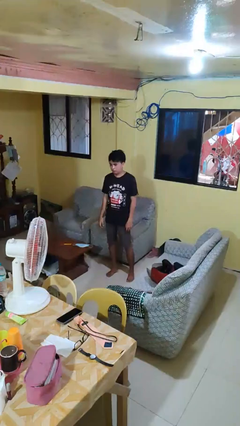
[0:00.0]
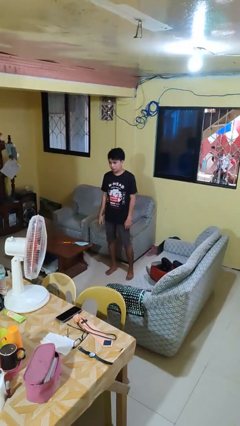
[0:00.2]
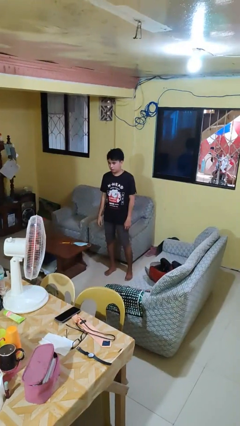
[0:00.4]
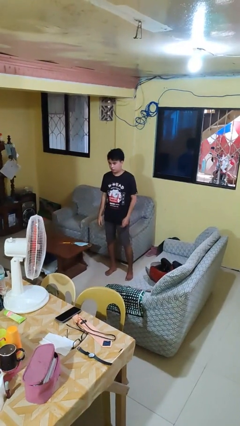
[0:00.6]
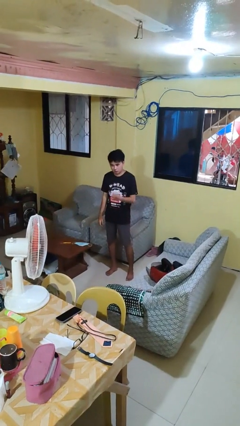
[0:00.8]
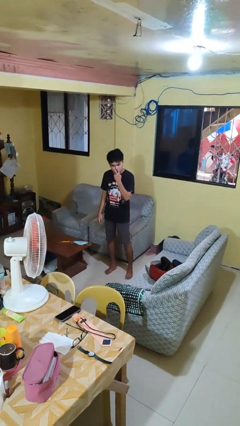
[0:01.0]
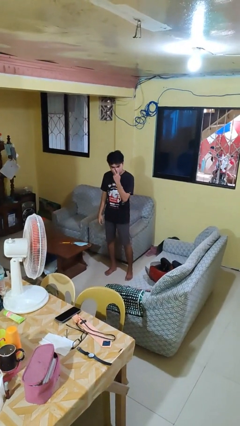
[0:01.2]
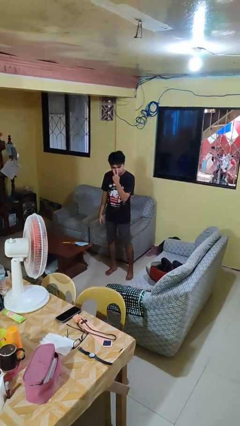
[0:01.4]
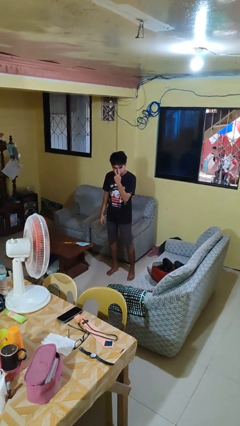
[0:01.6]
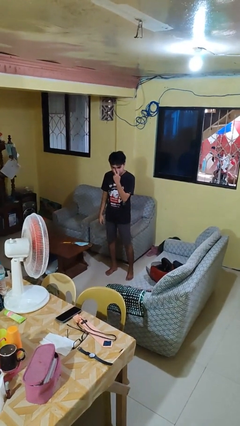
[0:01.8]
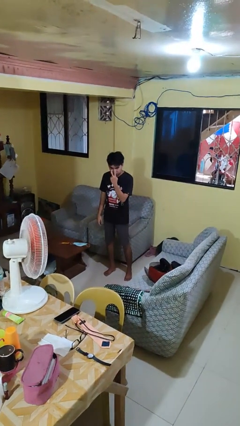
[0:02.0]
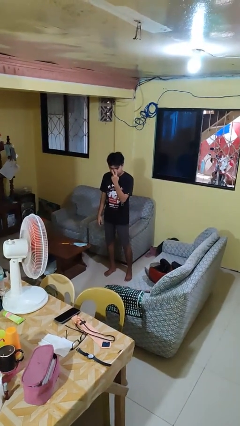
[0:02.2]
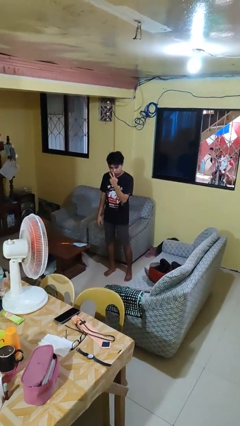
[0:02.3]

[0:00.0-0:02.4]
person gestures watch closely

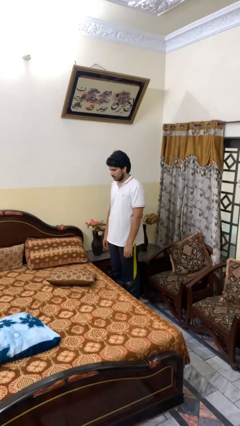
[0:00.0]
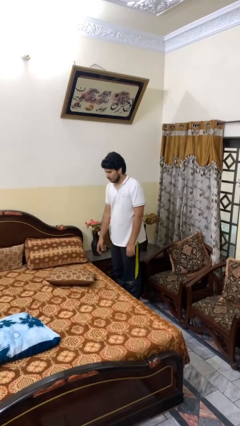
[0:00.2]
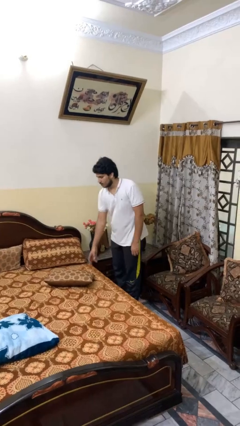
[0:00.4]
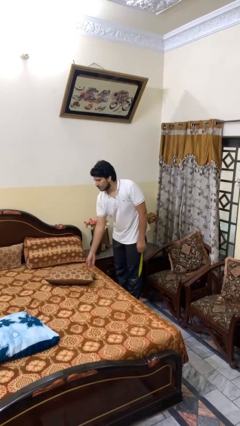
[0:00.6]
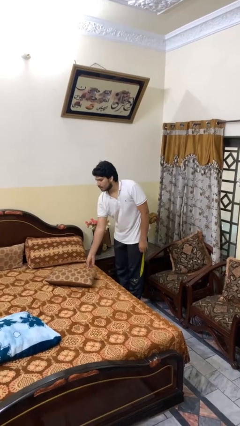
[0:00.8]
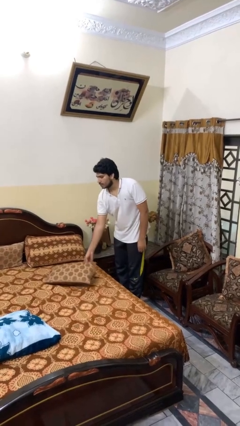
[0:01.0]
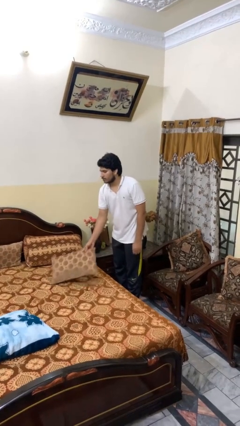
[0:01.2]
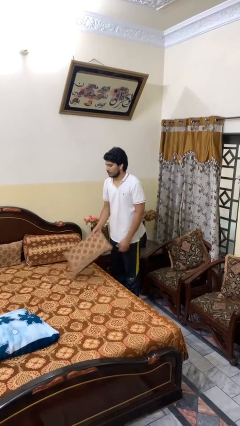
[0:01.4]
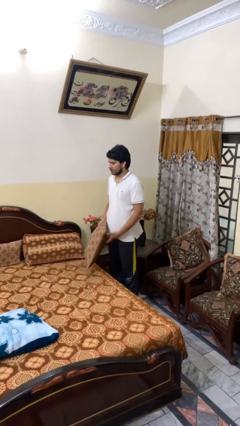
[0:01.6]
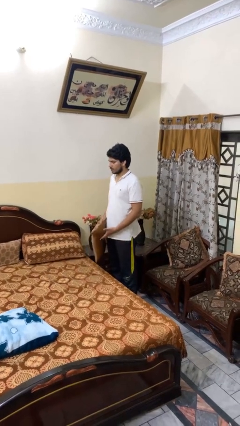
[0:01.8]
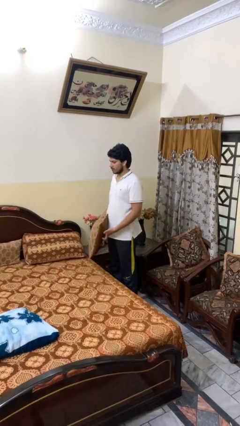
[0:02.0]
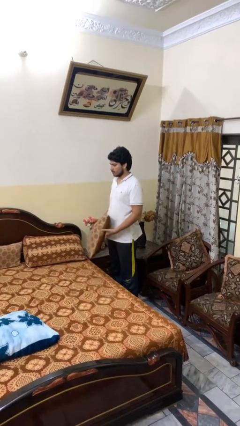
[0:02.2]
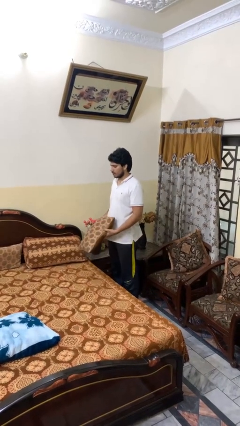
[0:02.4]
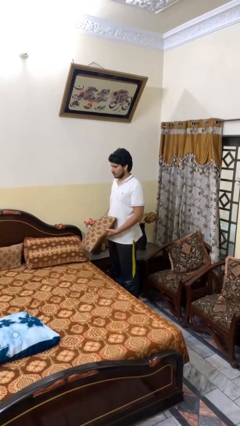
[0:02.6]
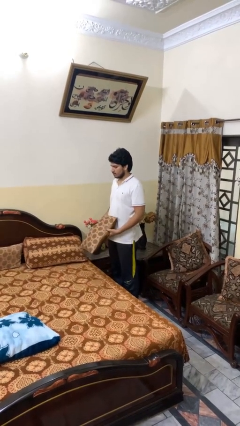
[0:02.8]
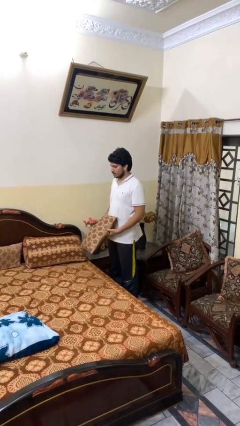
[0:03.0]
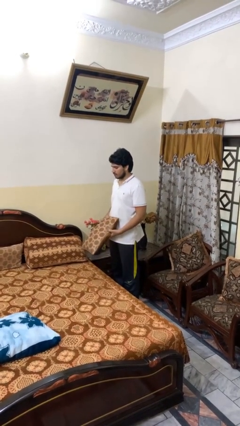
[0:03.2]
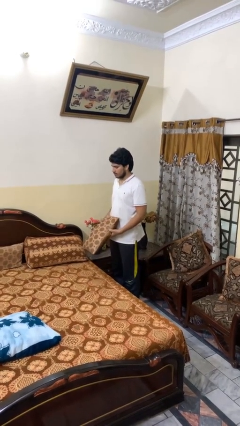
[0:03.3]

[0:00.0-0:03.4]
person picks up object from bed

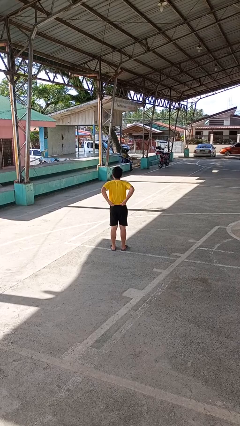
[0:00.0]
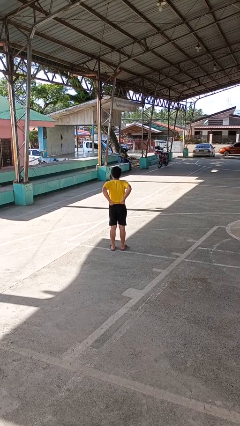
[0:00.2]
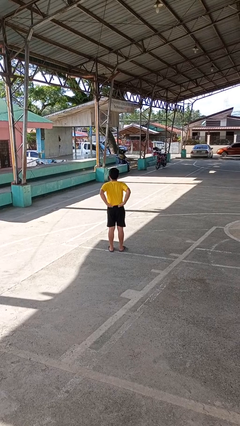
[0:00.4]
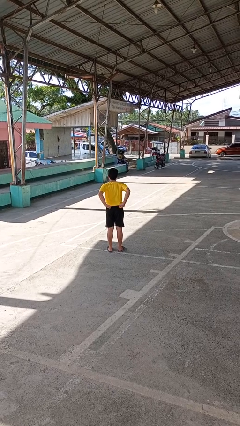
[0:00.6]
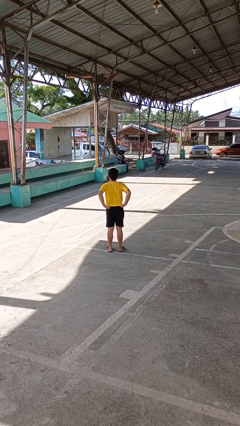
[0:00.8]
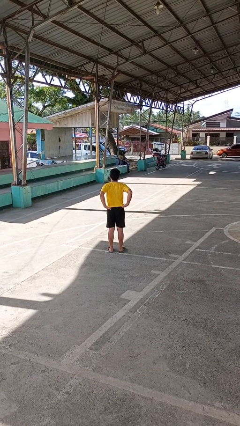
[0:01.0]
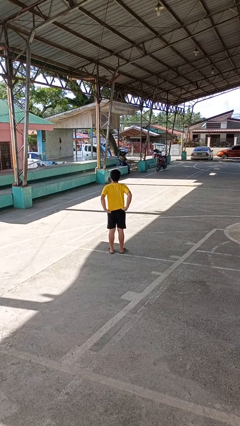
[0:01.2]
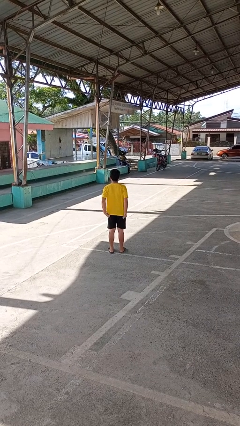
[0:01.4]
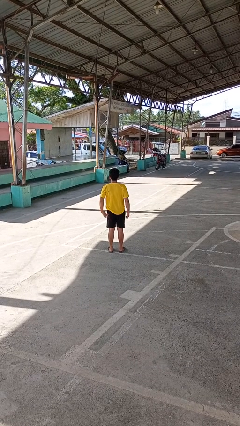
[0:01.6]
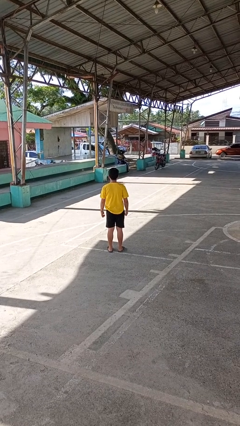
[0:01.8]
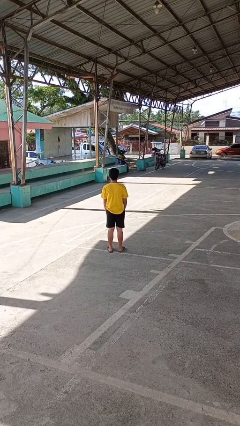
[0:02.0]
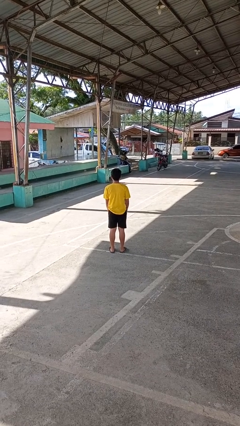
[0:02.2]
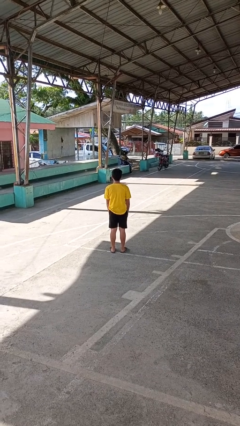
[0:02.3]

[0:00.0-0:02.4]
person untucks shirt

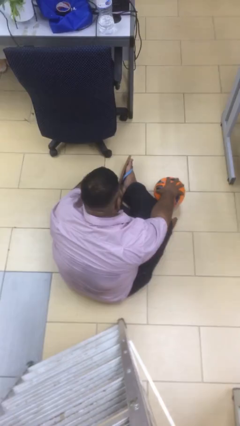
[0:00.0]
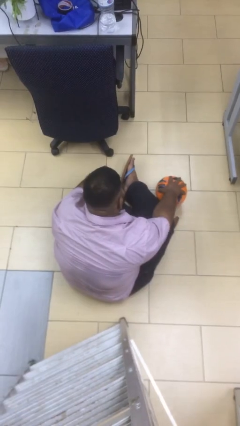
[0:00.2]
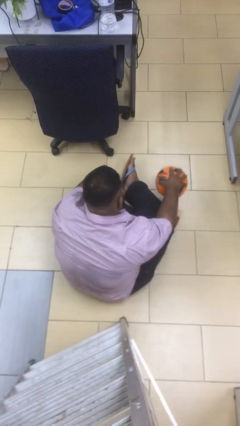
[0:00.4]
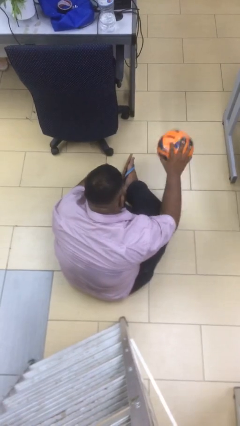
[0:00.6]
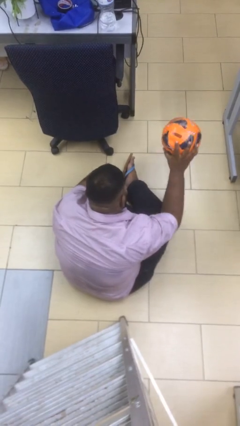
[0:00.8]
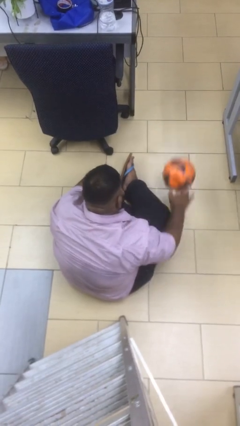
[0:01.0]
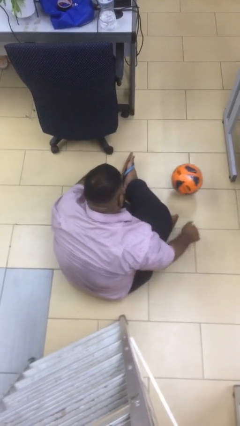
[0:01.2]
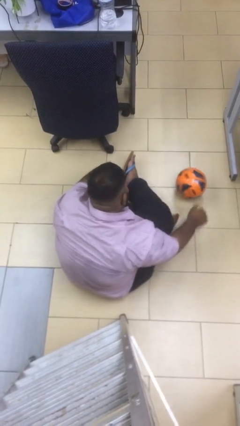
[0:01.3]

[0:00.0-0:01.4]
person bounces ball on floor

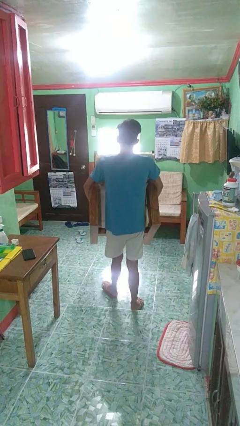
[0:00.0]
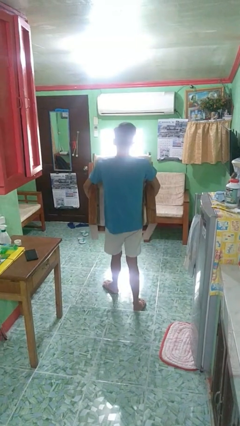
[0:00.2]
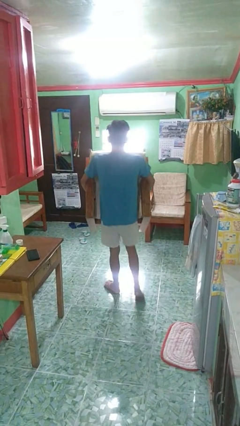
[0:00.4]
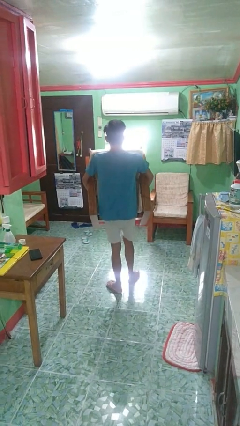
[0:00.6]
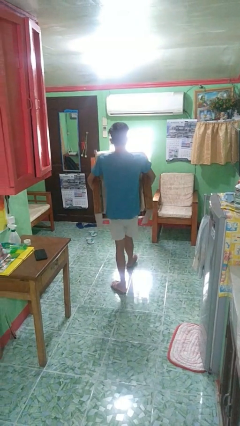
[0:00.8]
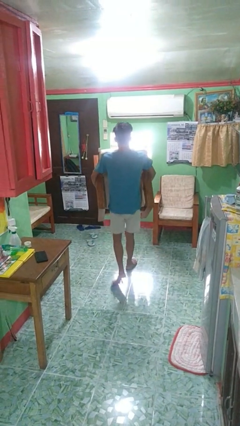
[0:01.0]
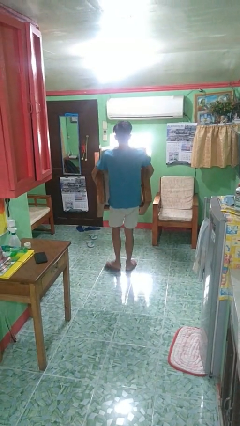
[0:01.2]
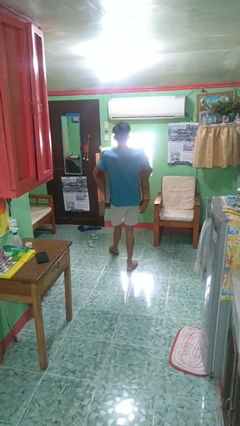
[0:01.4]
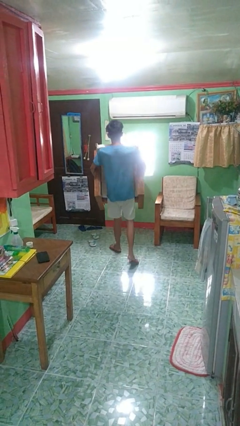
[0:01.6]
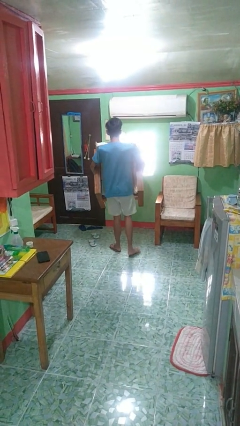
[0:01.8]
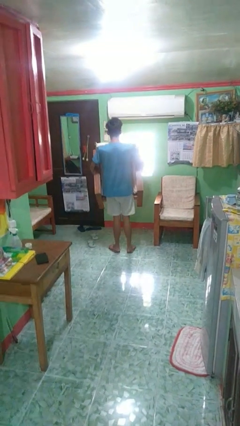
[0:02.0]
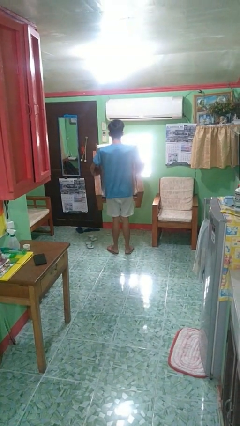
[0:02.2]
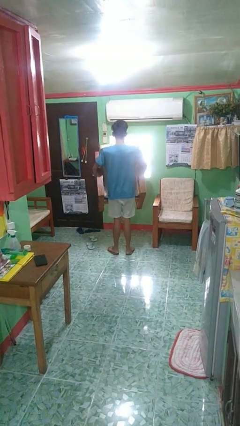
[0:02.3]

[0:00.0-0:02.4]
person carries furniture

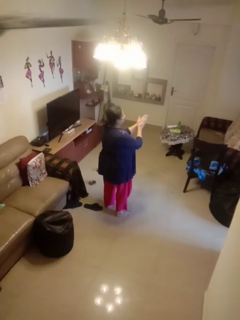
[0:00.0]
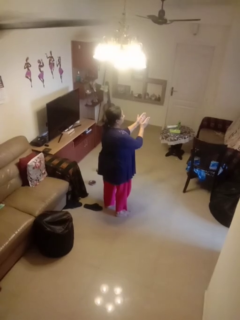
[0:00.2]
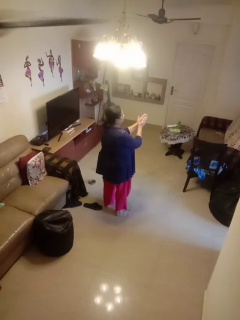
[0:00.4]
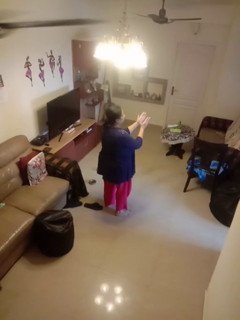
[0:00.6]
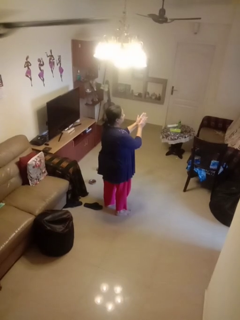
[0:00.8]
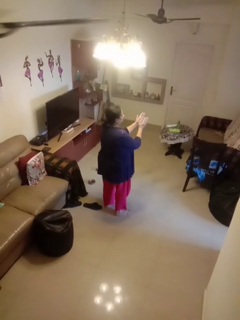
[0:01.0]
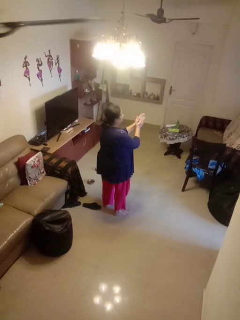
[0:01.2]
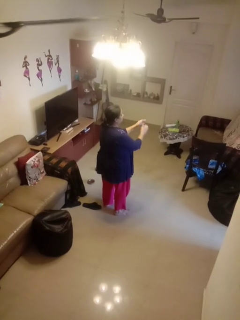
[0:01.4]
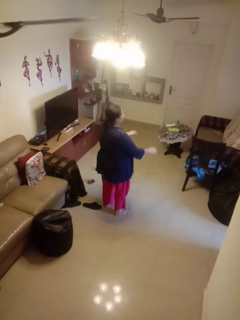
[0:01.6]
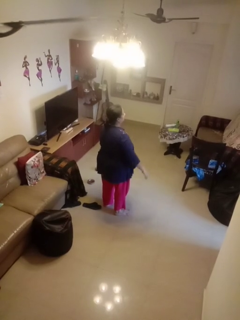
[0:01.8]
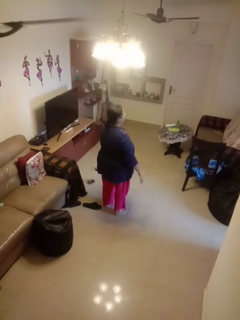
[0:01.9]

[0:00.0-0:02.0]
person claps hands

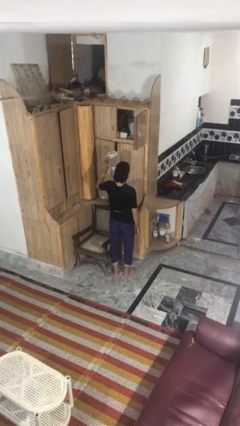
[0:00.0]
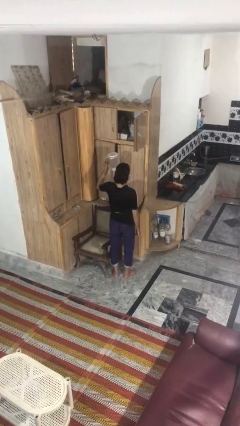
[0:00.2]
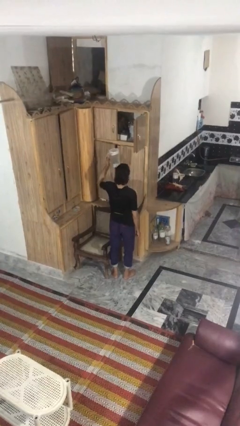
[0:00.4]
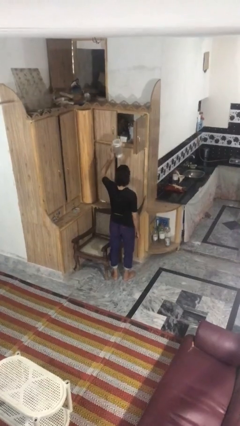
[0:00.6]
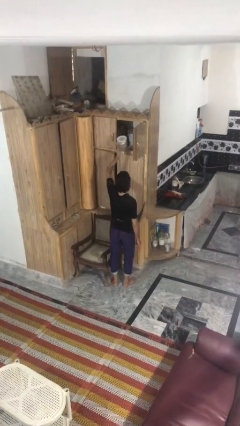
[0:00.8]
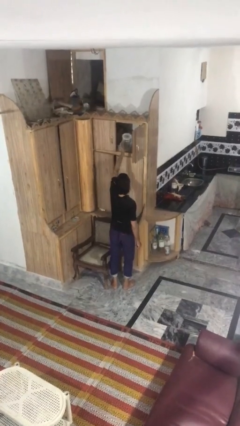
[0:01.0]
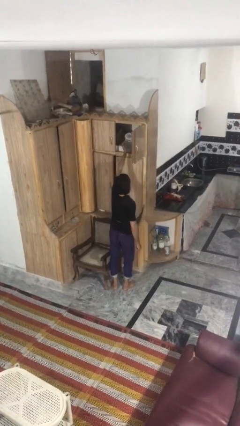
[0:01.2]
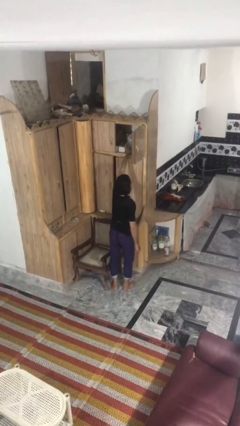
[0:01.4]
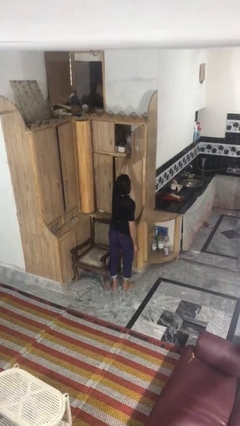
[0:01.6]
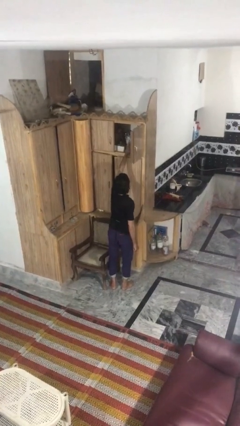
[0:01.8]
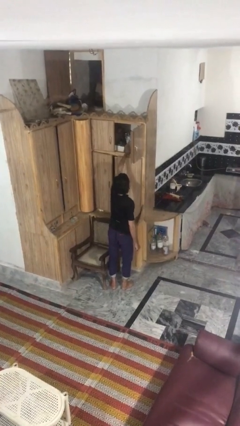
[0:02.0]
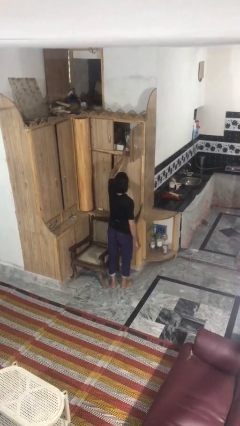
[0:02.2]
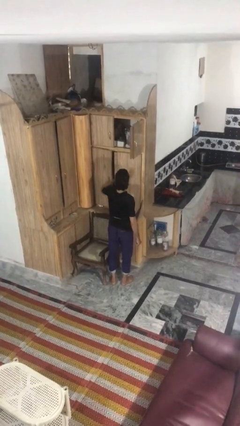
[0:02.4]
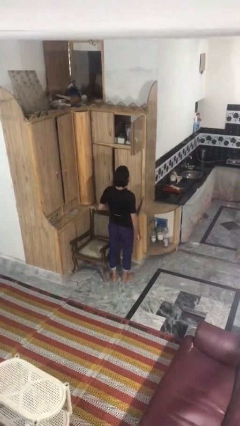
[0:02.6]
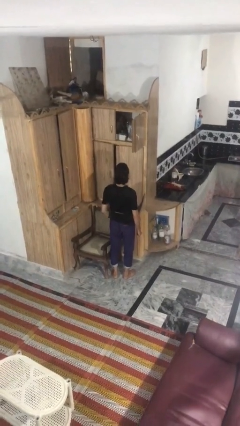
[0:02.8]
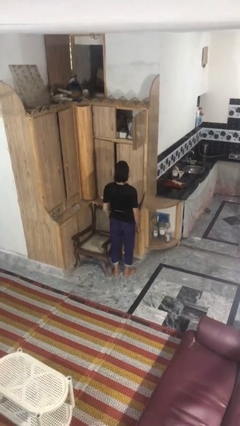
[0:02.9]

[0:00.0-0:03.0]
person puts down object on shelf

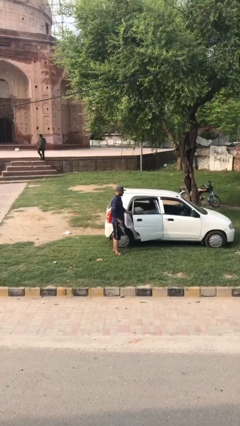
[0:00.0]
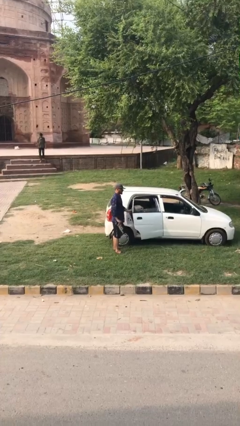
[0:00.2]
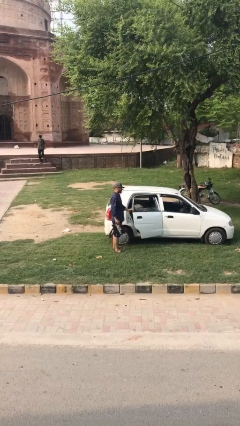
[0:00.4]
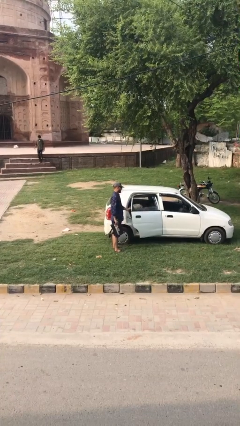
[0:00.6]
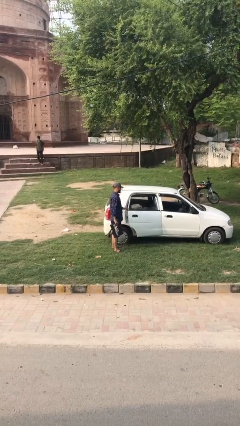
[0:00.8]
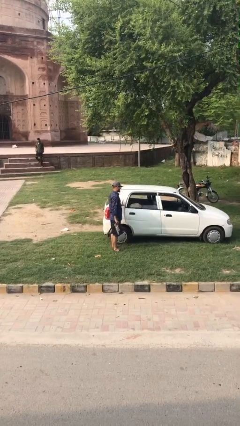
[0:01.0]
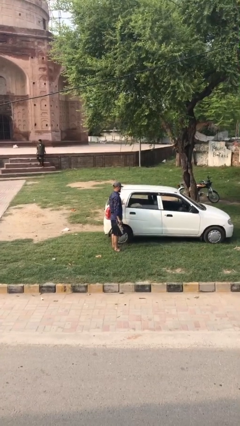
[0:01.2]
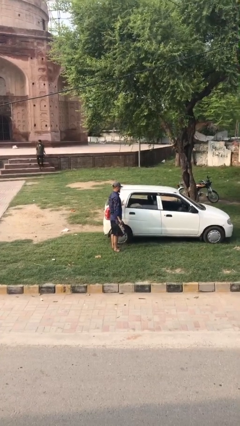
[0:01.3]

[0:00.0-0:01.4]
person closes car door
